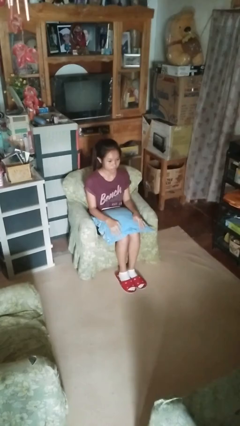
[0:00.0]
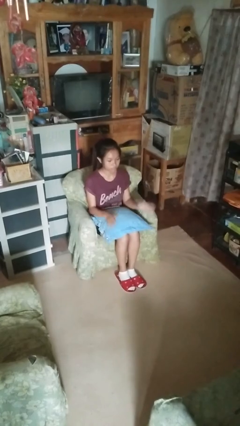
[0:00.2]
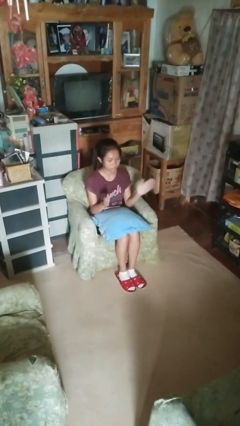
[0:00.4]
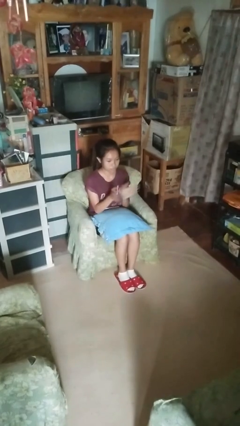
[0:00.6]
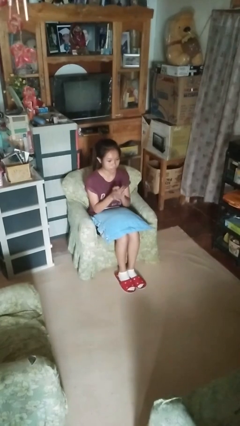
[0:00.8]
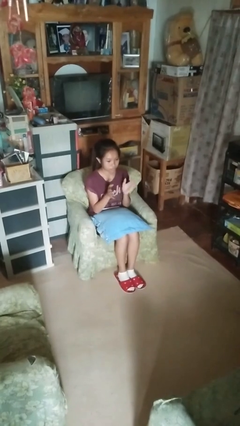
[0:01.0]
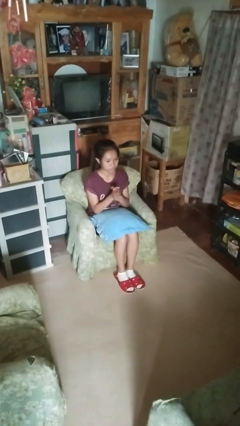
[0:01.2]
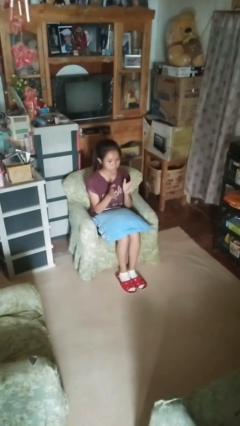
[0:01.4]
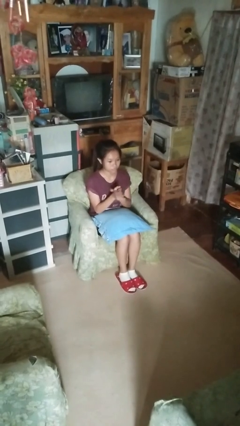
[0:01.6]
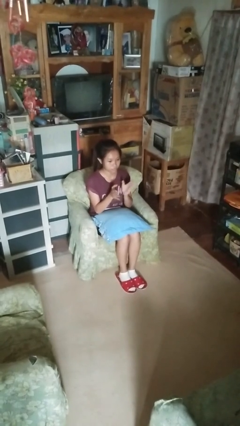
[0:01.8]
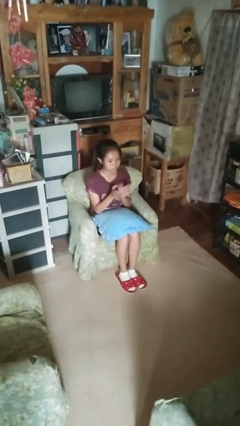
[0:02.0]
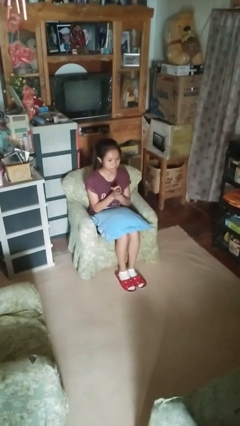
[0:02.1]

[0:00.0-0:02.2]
person claps hands

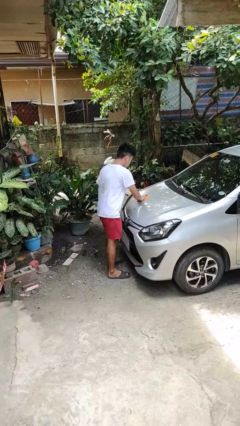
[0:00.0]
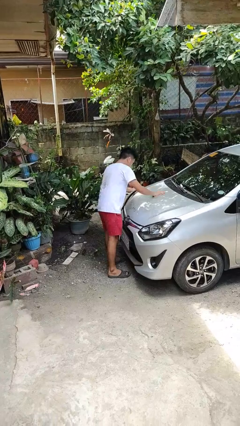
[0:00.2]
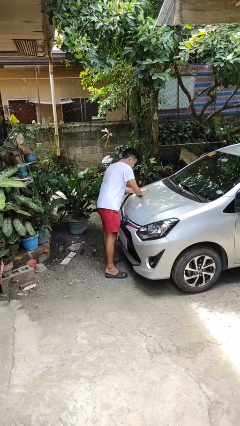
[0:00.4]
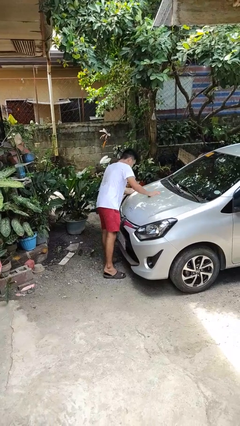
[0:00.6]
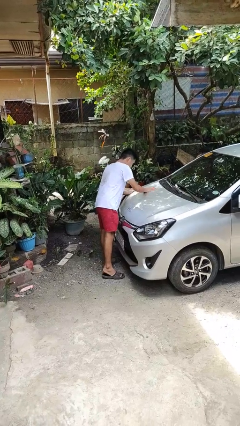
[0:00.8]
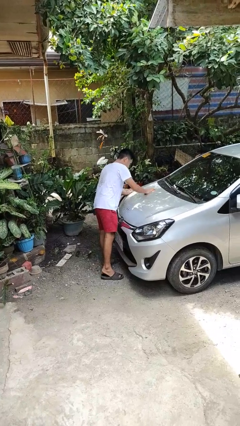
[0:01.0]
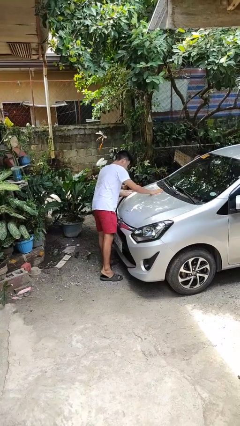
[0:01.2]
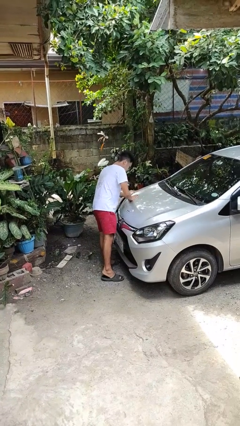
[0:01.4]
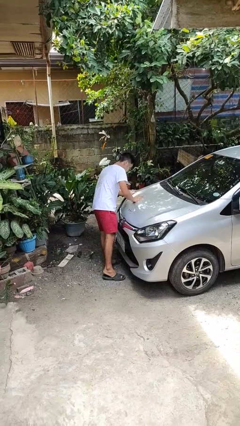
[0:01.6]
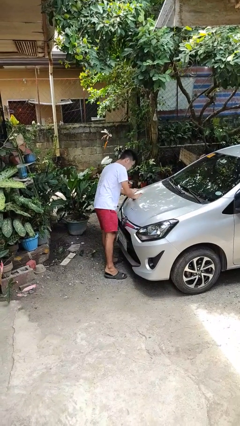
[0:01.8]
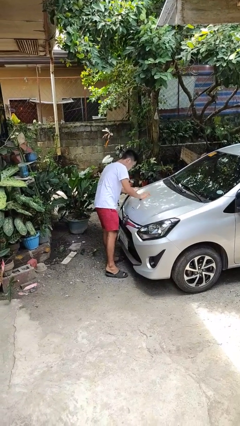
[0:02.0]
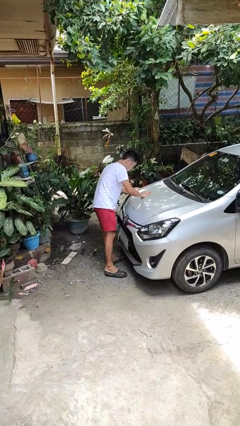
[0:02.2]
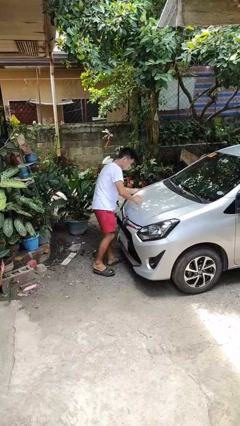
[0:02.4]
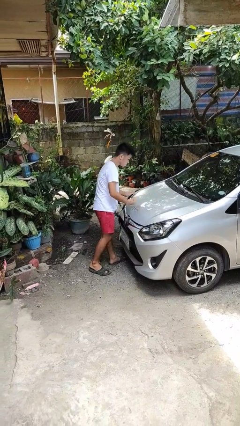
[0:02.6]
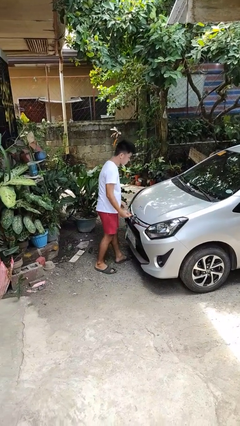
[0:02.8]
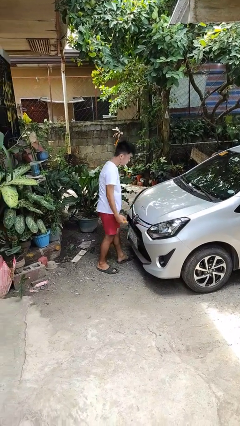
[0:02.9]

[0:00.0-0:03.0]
person polishes car with rag

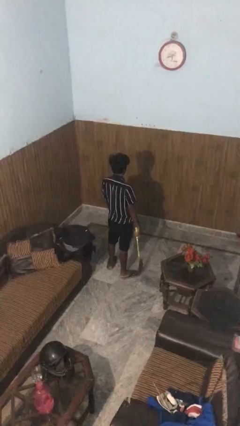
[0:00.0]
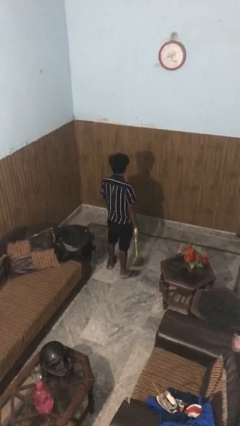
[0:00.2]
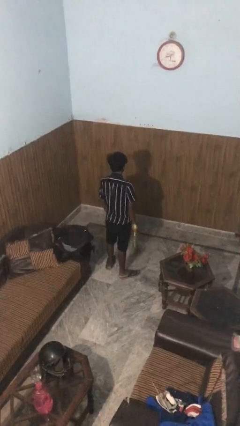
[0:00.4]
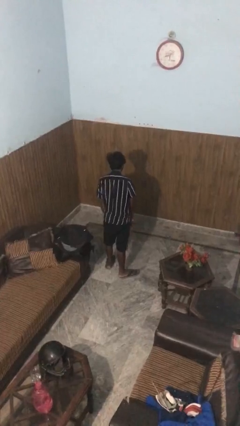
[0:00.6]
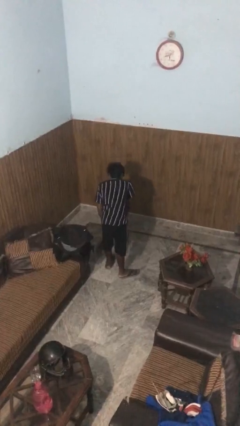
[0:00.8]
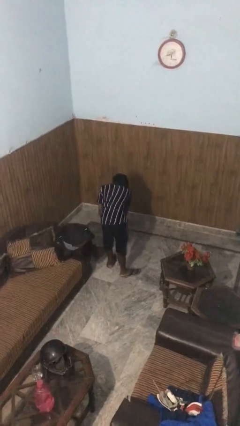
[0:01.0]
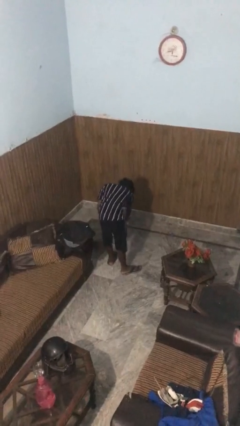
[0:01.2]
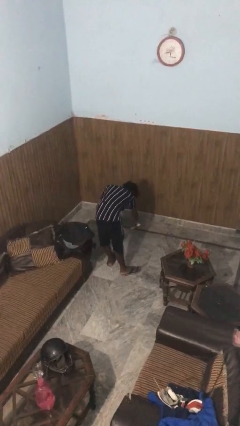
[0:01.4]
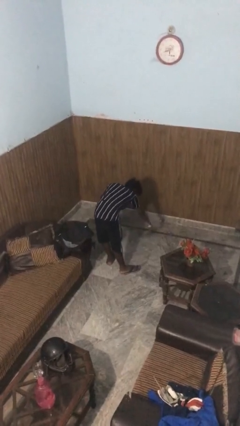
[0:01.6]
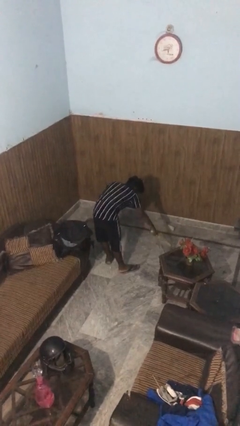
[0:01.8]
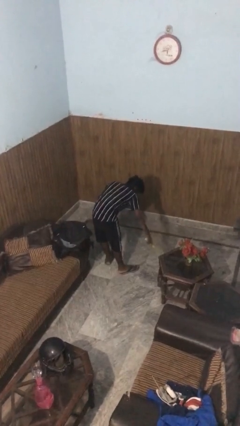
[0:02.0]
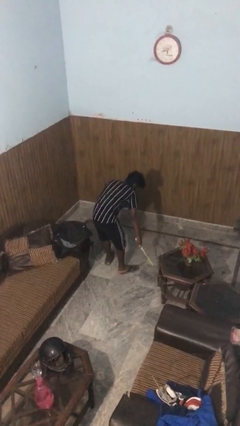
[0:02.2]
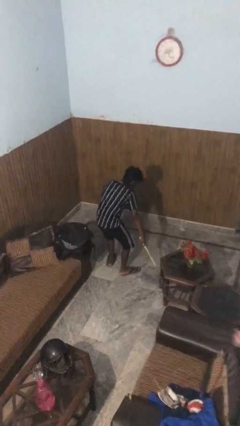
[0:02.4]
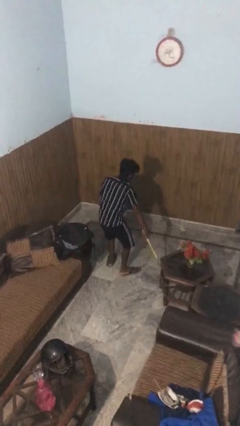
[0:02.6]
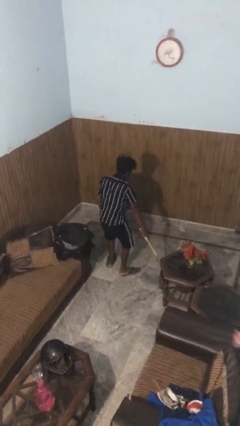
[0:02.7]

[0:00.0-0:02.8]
person sweeps floor

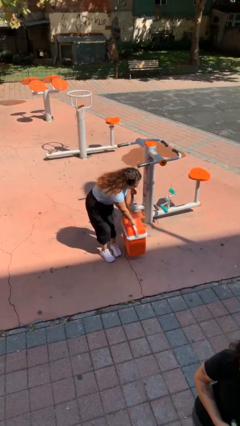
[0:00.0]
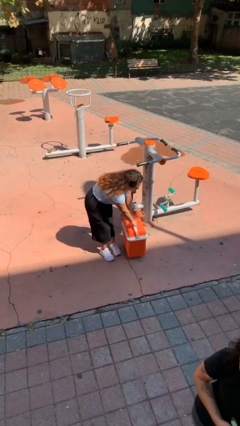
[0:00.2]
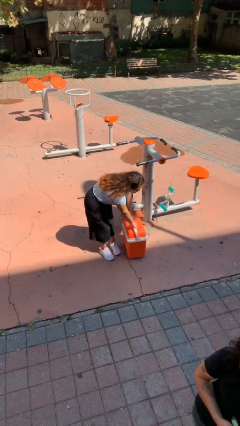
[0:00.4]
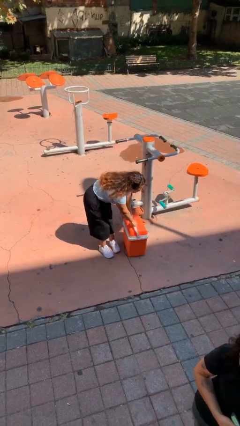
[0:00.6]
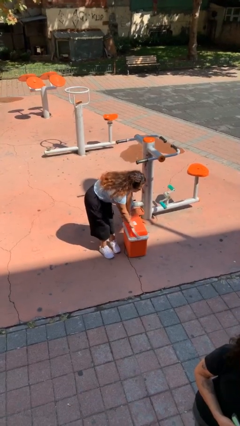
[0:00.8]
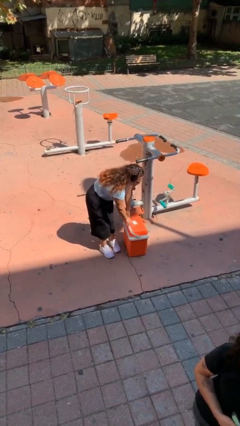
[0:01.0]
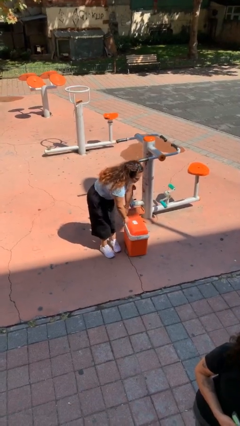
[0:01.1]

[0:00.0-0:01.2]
person puts down object on floor

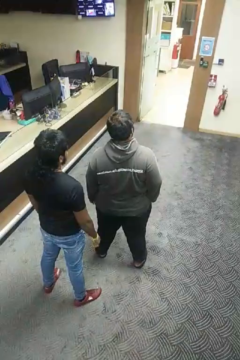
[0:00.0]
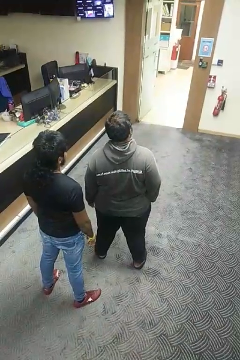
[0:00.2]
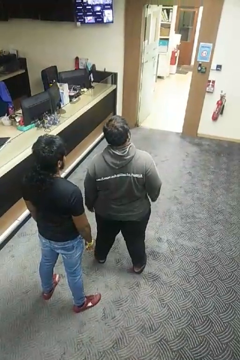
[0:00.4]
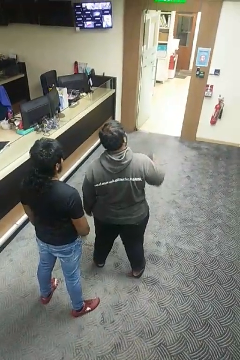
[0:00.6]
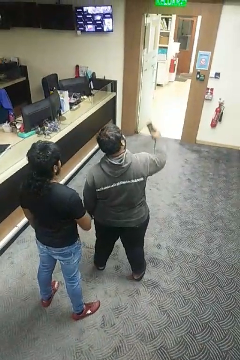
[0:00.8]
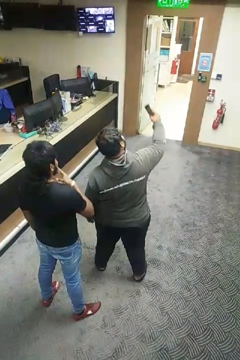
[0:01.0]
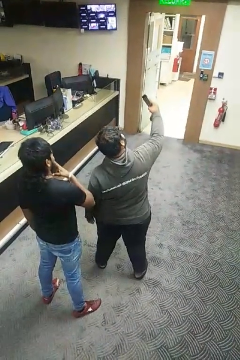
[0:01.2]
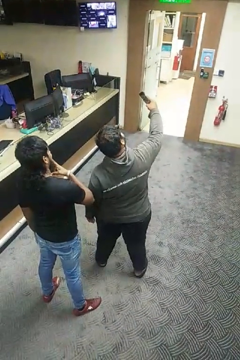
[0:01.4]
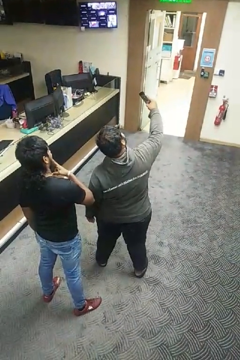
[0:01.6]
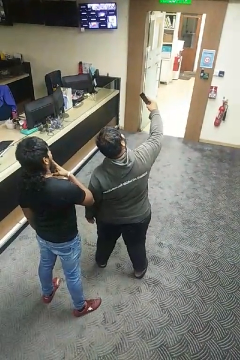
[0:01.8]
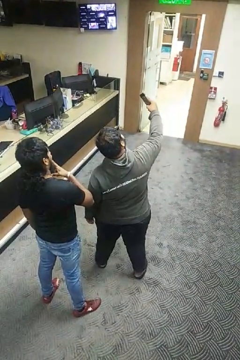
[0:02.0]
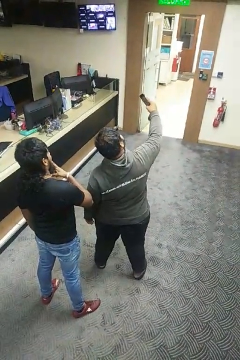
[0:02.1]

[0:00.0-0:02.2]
person takes selfie with person

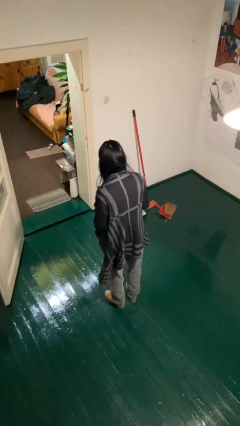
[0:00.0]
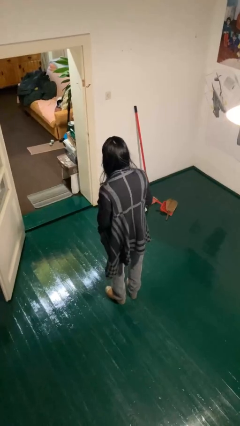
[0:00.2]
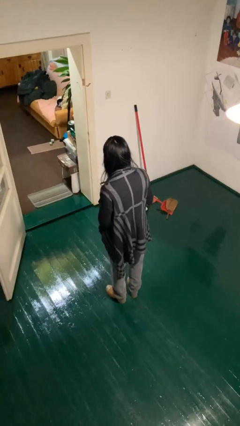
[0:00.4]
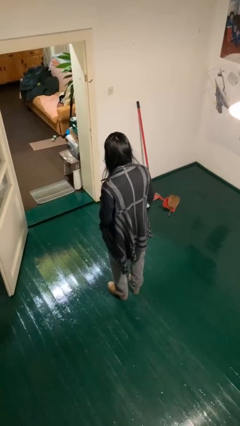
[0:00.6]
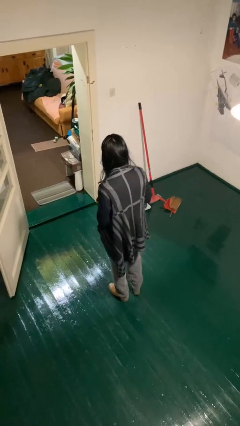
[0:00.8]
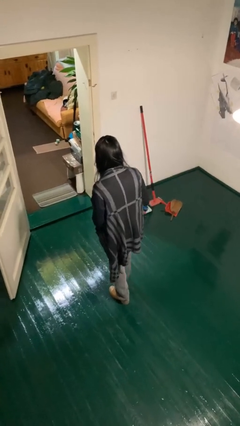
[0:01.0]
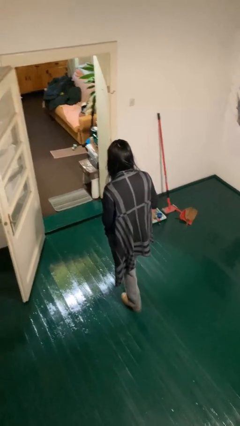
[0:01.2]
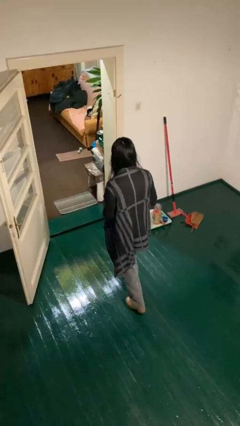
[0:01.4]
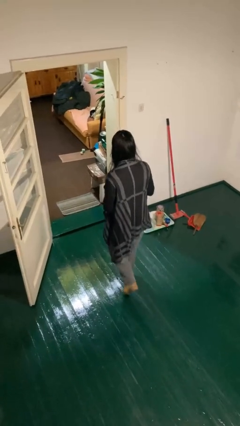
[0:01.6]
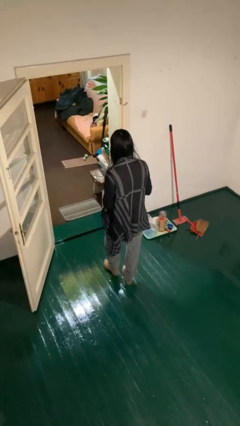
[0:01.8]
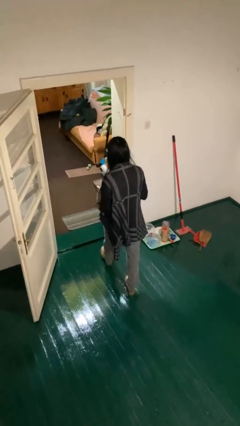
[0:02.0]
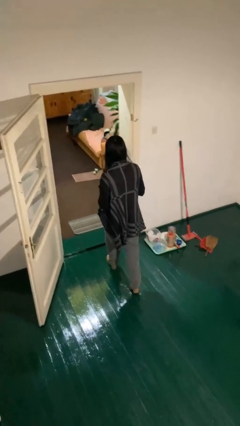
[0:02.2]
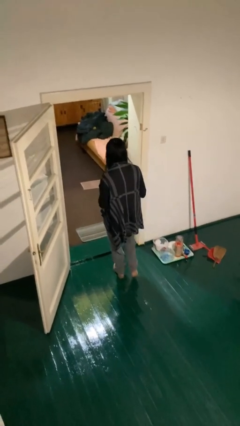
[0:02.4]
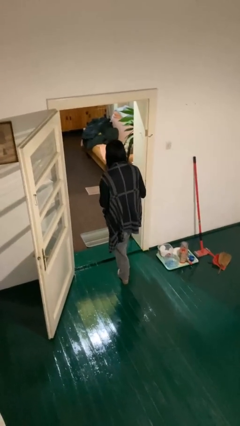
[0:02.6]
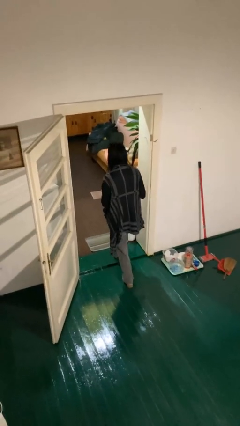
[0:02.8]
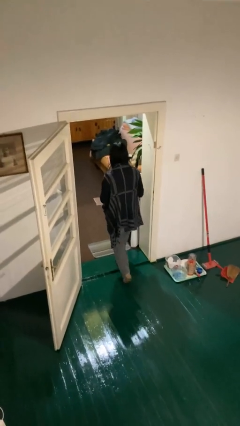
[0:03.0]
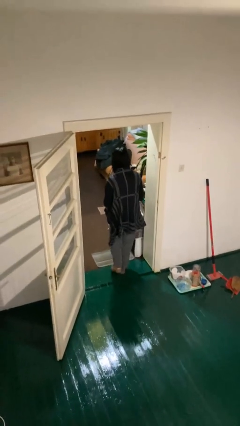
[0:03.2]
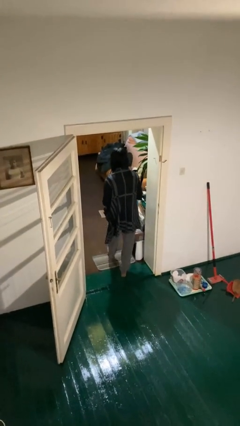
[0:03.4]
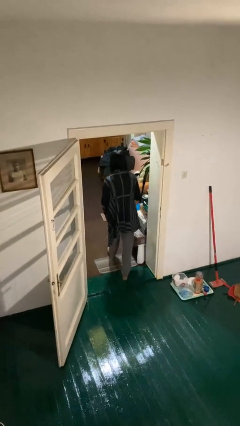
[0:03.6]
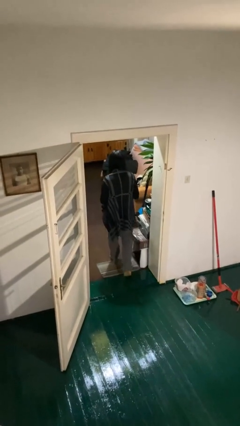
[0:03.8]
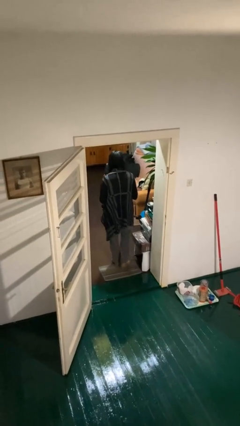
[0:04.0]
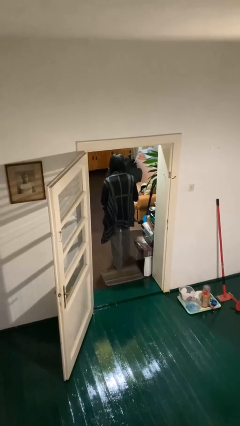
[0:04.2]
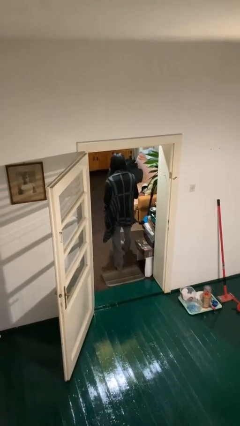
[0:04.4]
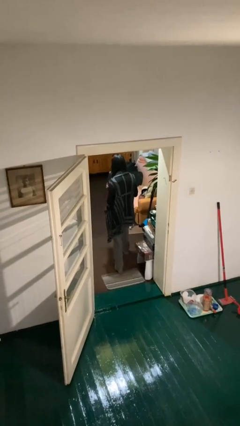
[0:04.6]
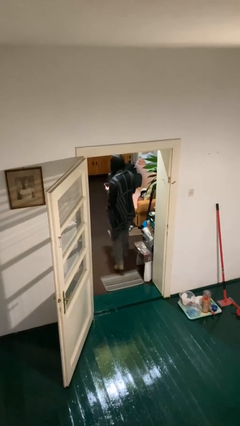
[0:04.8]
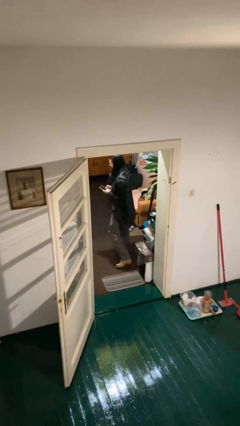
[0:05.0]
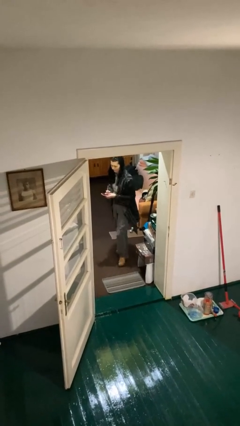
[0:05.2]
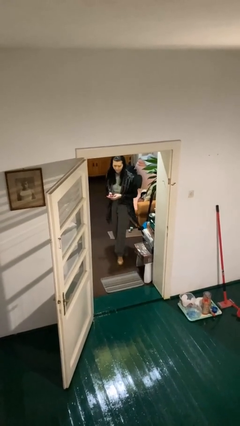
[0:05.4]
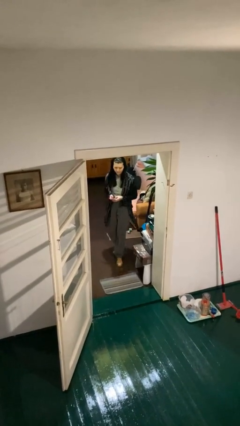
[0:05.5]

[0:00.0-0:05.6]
person exits scene through structure

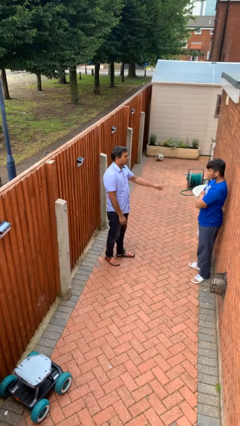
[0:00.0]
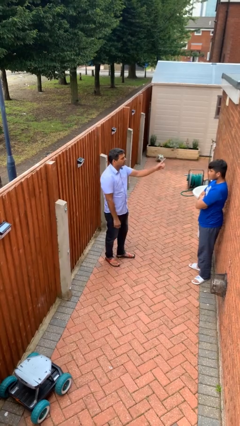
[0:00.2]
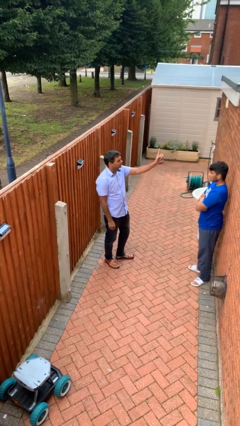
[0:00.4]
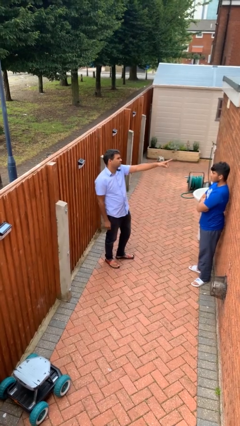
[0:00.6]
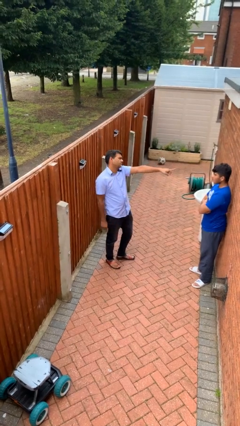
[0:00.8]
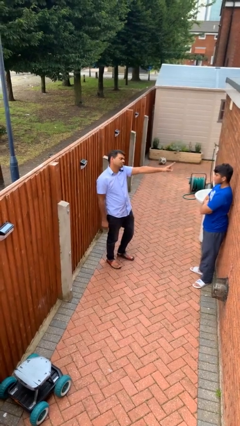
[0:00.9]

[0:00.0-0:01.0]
person points at person
